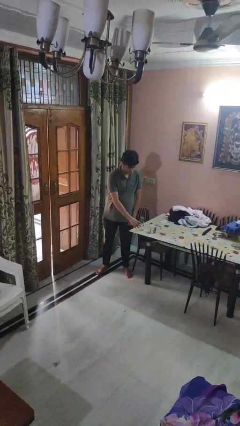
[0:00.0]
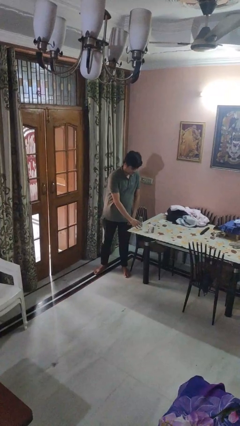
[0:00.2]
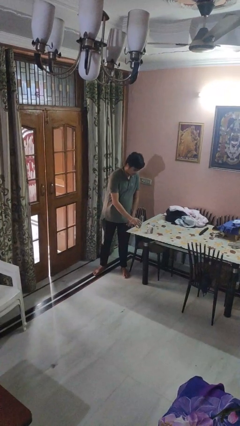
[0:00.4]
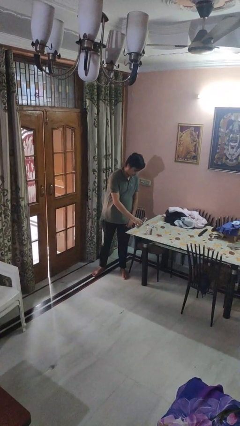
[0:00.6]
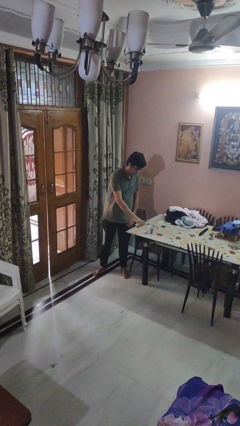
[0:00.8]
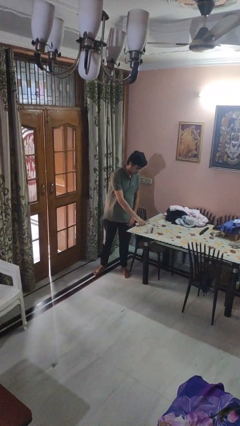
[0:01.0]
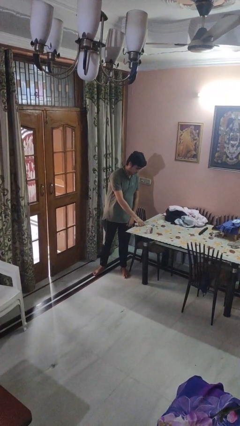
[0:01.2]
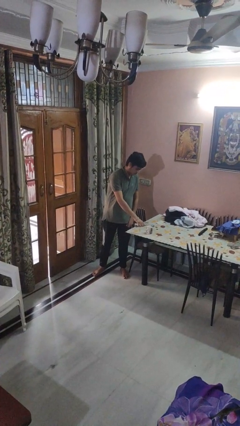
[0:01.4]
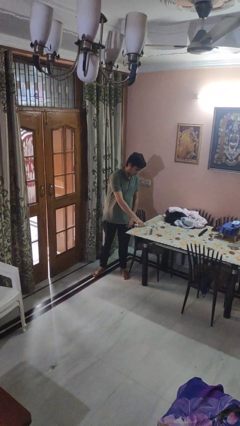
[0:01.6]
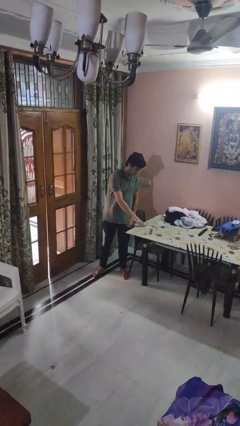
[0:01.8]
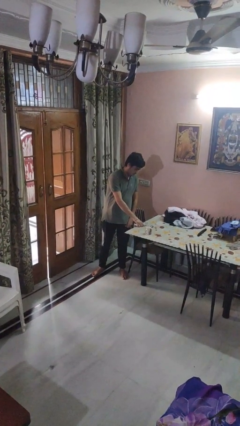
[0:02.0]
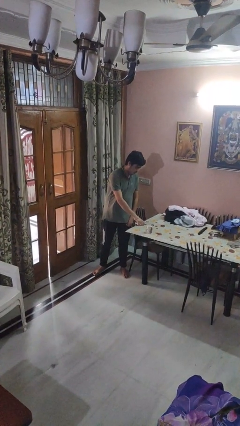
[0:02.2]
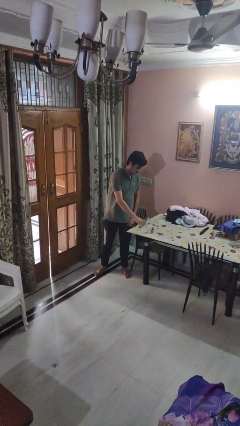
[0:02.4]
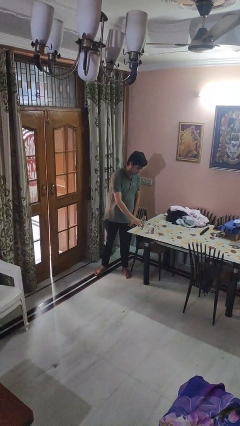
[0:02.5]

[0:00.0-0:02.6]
person pours liquid into cup

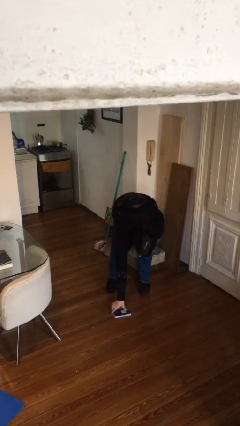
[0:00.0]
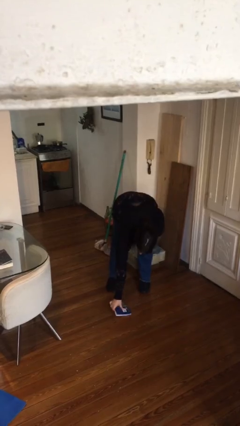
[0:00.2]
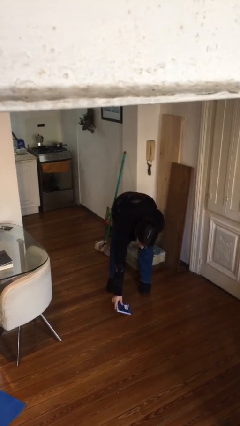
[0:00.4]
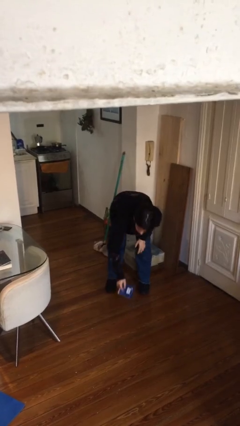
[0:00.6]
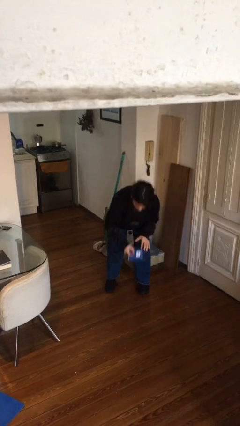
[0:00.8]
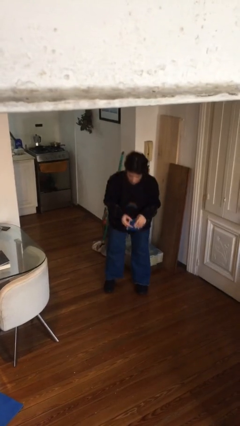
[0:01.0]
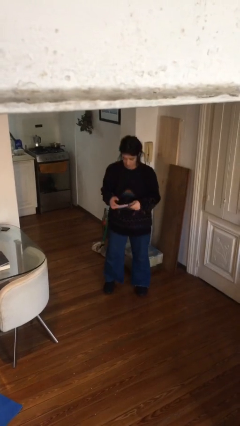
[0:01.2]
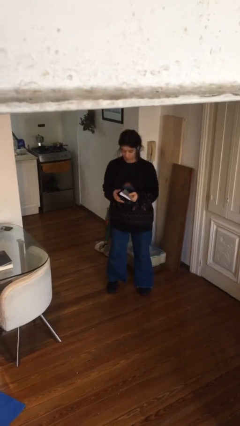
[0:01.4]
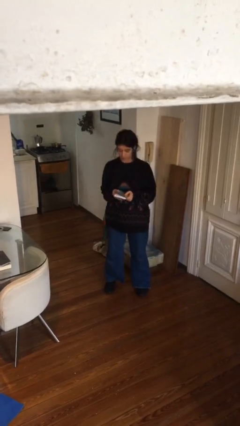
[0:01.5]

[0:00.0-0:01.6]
person picks up object from floor

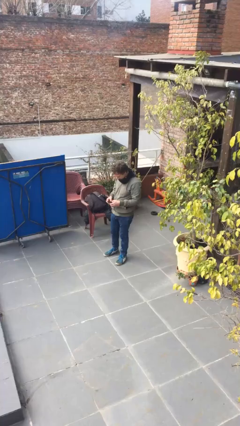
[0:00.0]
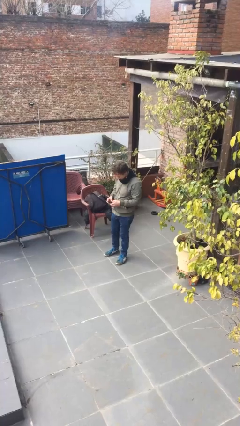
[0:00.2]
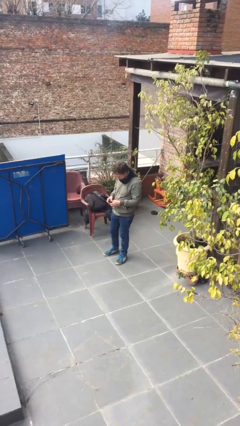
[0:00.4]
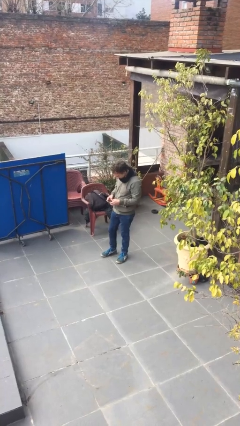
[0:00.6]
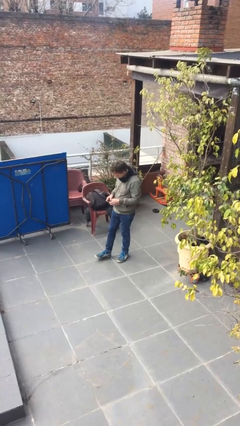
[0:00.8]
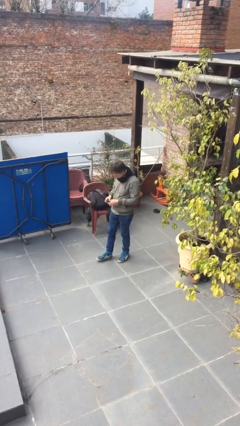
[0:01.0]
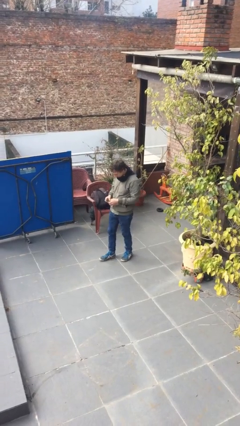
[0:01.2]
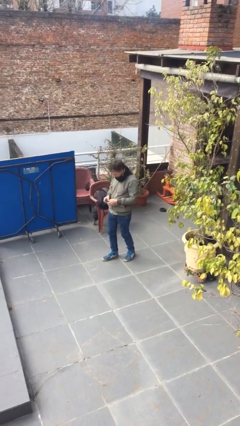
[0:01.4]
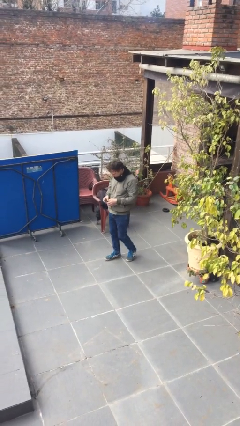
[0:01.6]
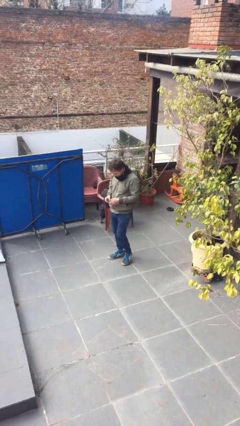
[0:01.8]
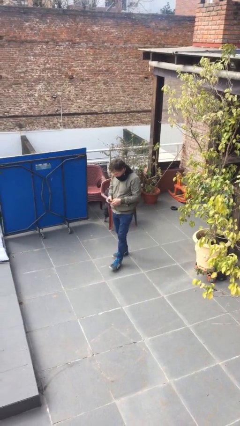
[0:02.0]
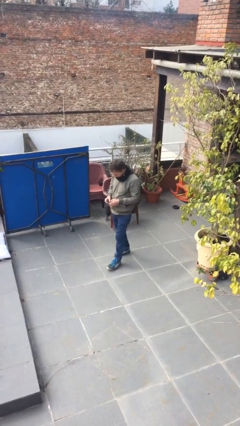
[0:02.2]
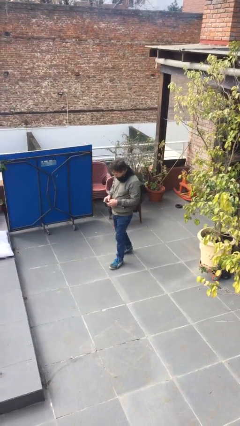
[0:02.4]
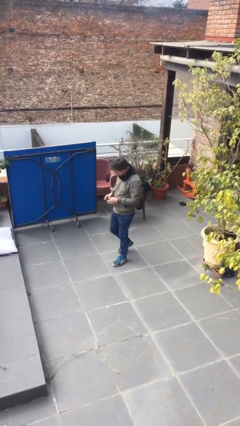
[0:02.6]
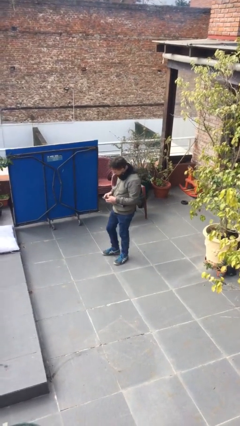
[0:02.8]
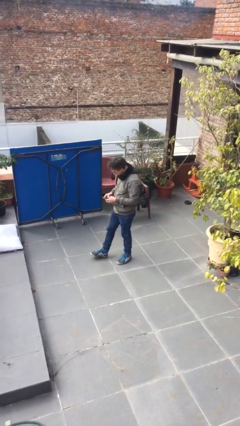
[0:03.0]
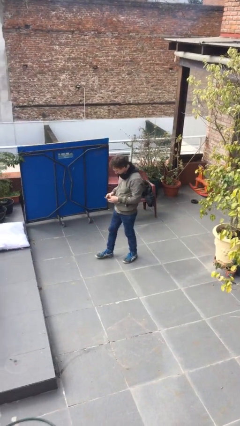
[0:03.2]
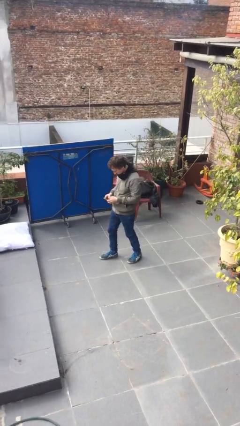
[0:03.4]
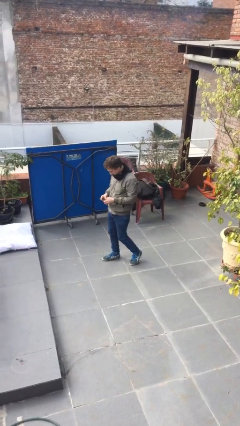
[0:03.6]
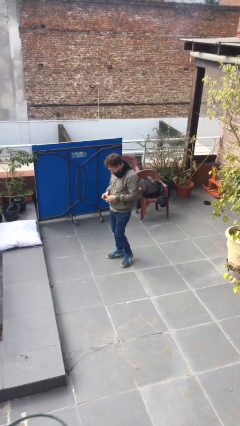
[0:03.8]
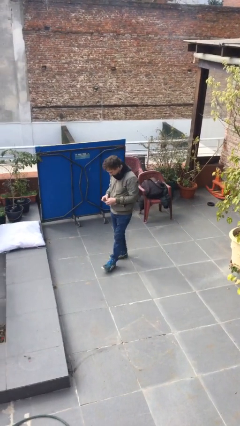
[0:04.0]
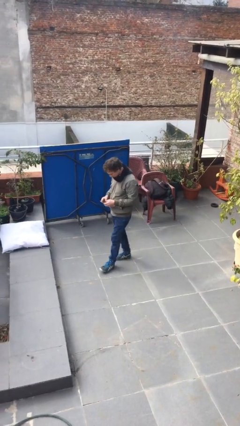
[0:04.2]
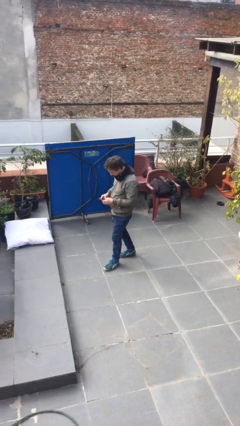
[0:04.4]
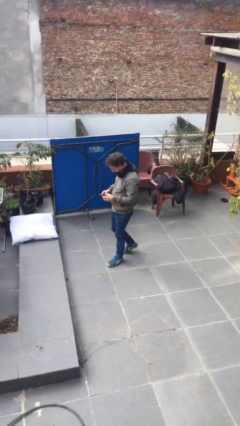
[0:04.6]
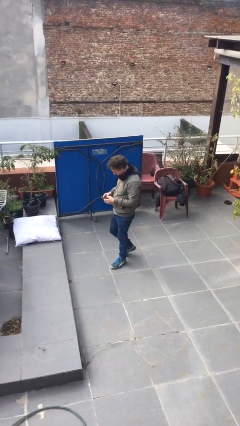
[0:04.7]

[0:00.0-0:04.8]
person texts on phone

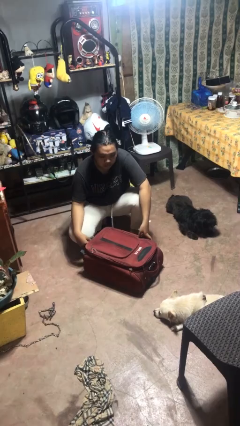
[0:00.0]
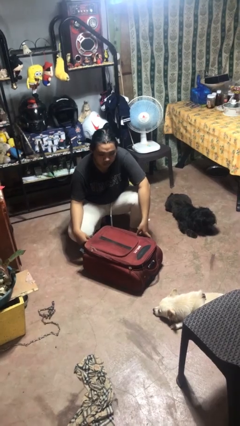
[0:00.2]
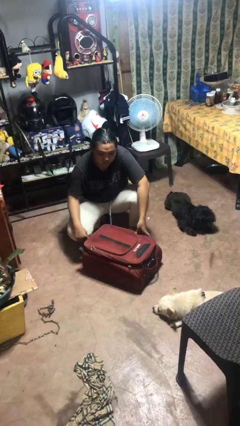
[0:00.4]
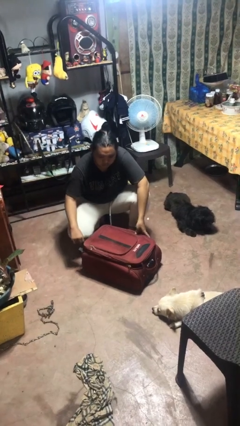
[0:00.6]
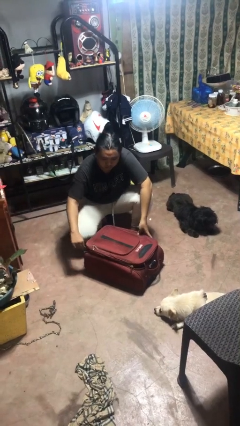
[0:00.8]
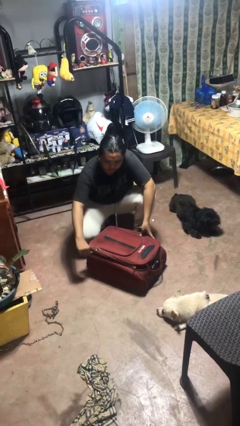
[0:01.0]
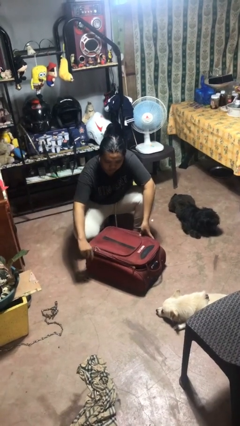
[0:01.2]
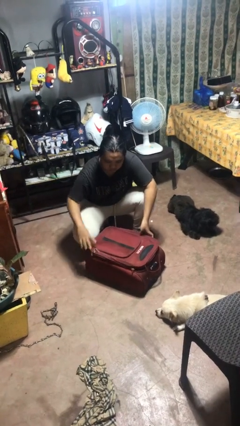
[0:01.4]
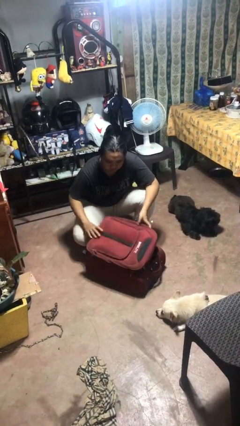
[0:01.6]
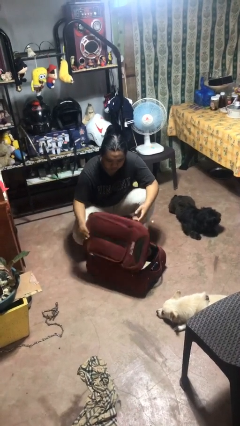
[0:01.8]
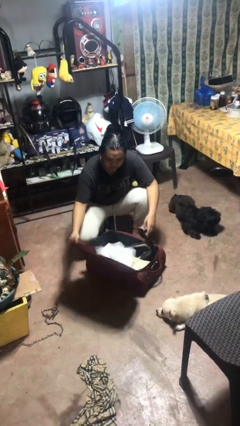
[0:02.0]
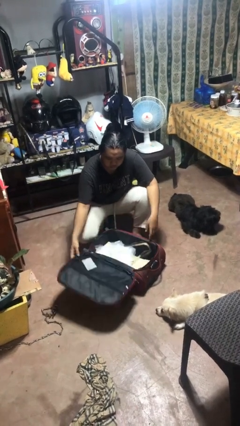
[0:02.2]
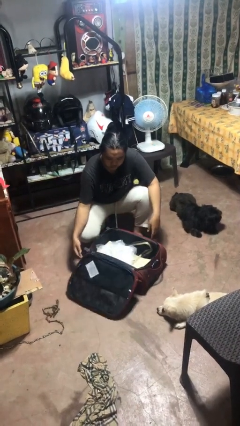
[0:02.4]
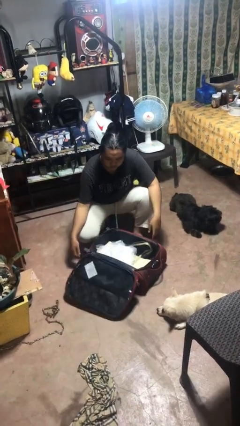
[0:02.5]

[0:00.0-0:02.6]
person opens suitcase

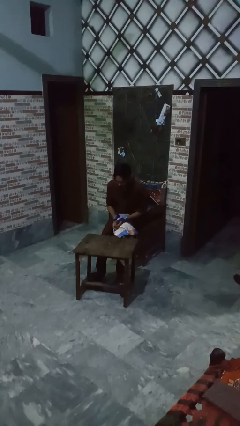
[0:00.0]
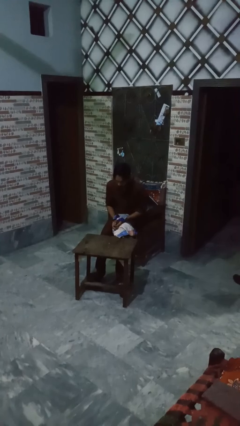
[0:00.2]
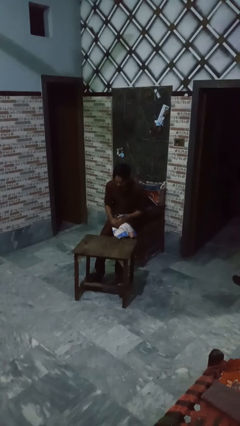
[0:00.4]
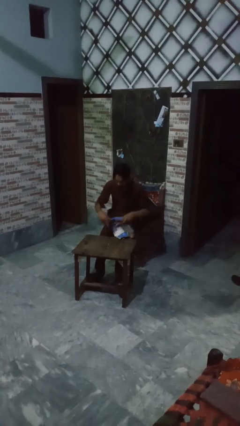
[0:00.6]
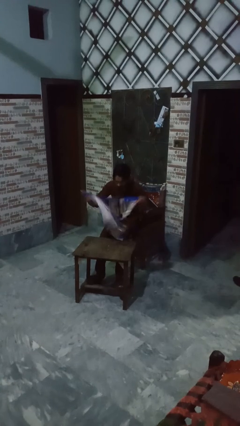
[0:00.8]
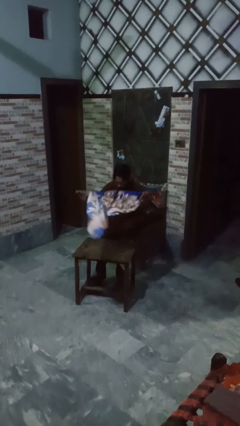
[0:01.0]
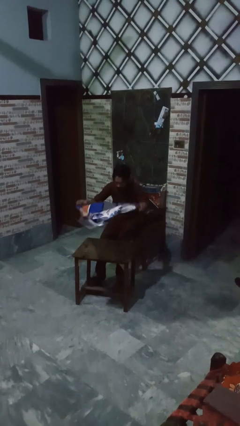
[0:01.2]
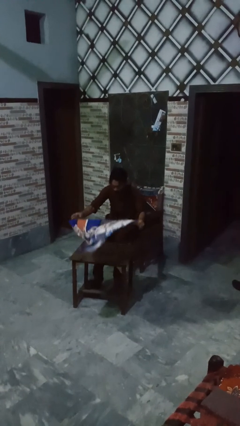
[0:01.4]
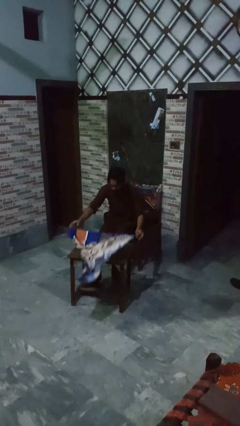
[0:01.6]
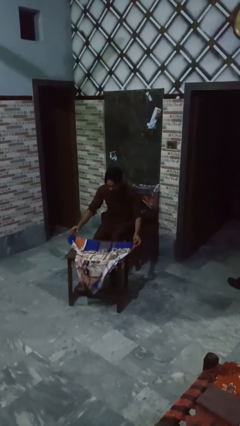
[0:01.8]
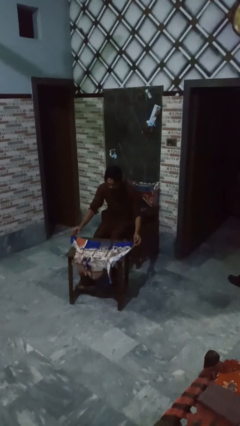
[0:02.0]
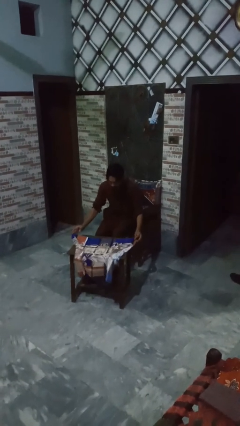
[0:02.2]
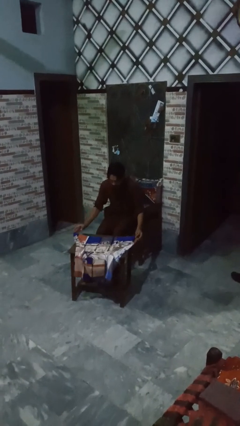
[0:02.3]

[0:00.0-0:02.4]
person spreads tablecloth

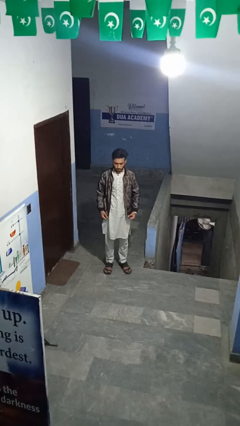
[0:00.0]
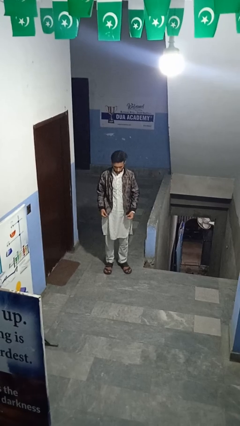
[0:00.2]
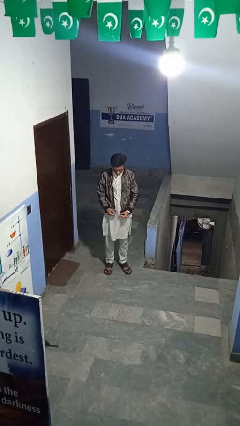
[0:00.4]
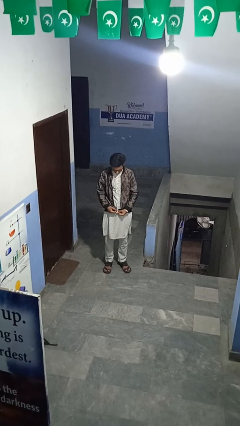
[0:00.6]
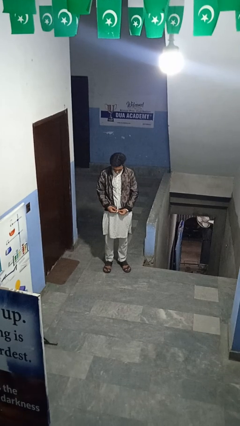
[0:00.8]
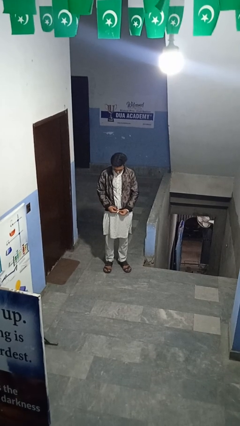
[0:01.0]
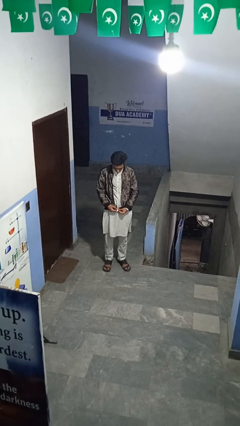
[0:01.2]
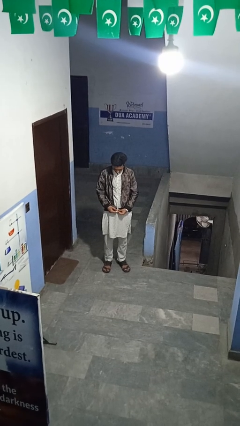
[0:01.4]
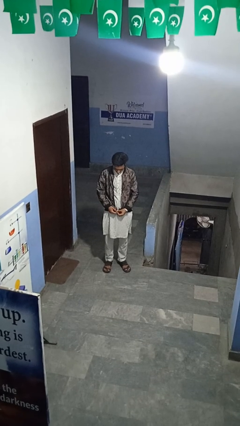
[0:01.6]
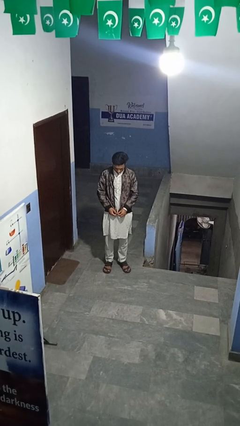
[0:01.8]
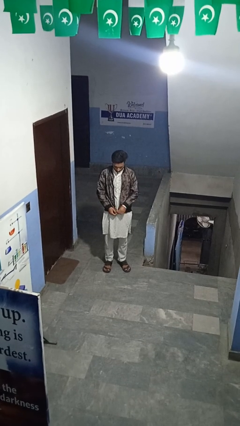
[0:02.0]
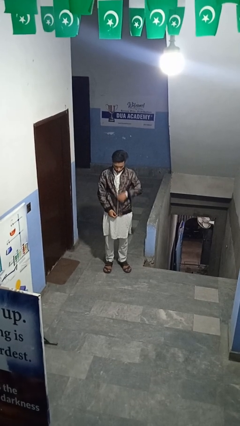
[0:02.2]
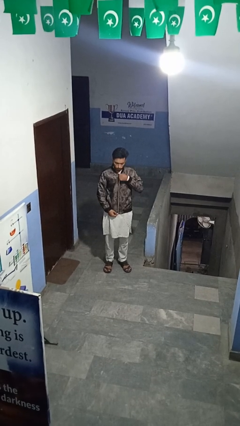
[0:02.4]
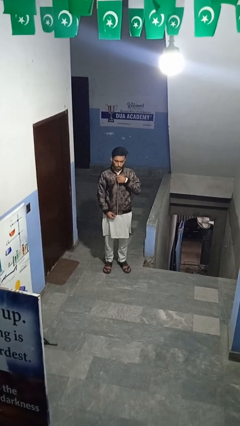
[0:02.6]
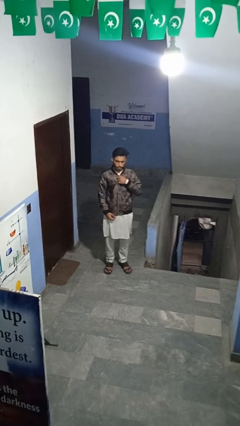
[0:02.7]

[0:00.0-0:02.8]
person zips up jacket

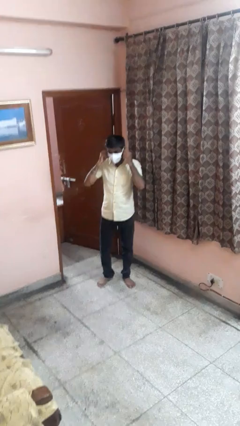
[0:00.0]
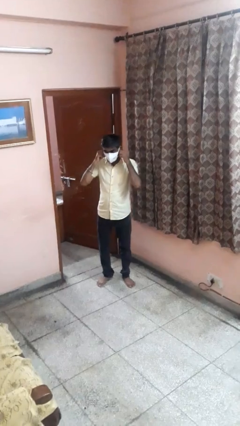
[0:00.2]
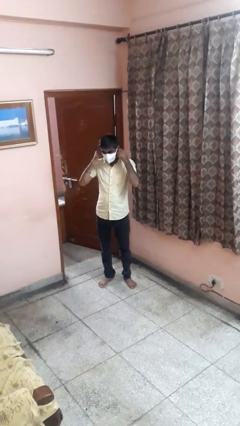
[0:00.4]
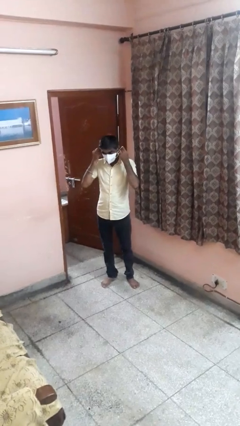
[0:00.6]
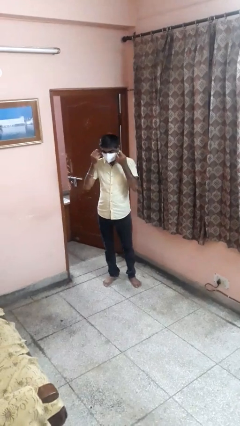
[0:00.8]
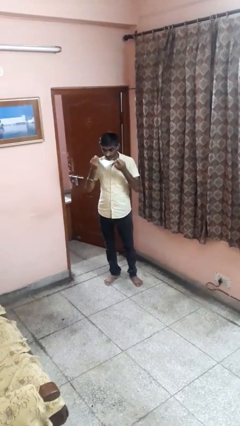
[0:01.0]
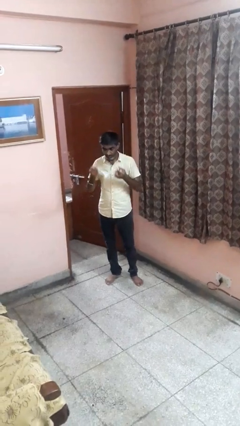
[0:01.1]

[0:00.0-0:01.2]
person takes off facemask
